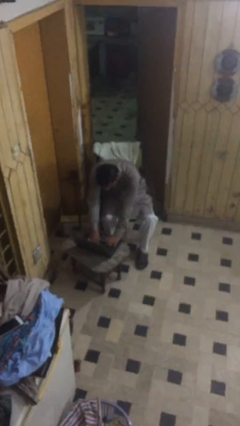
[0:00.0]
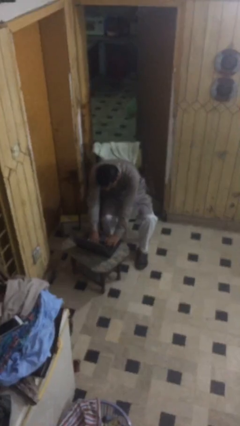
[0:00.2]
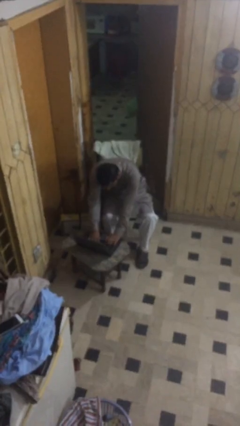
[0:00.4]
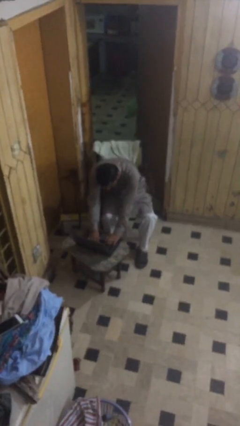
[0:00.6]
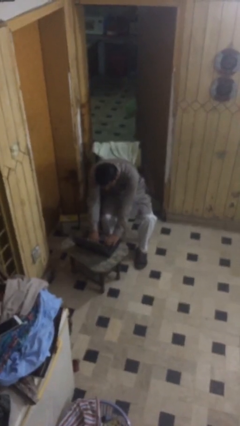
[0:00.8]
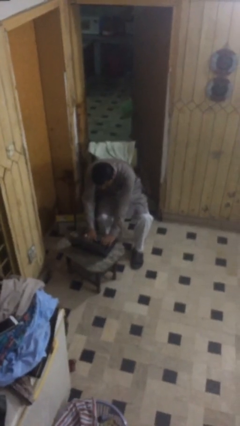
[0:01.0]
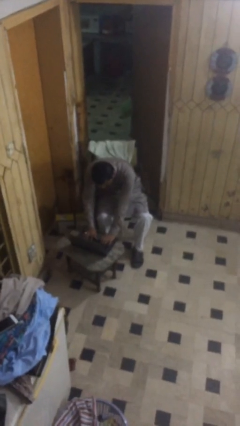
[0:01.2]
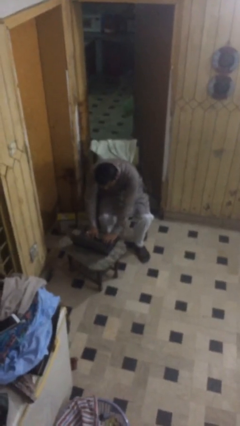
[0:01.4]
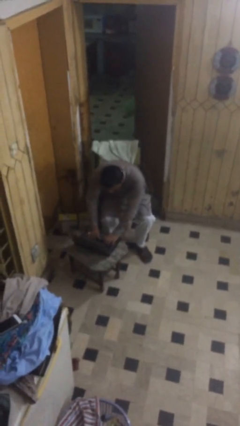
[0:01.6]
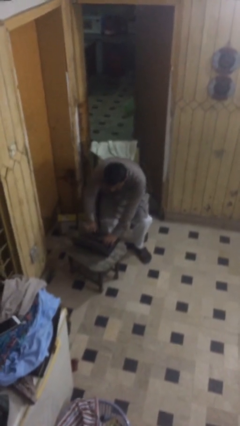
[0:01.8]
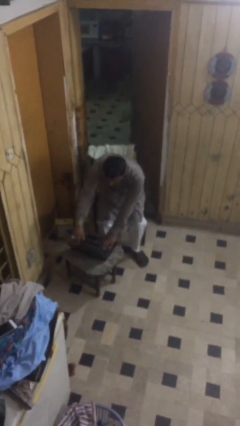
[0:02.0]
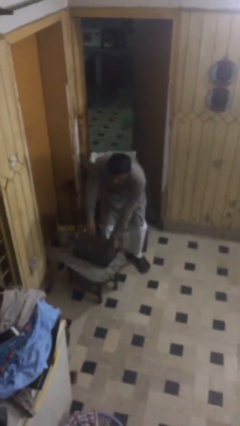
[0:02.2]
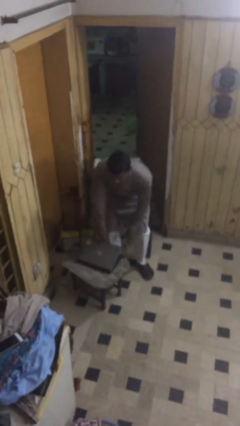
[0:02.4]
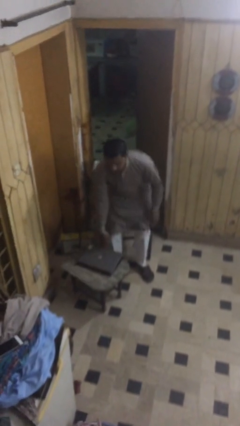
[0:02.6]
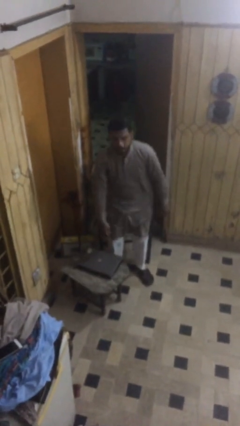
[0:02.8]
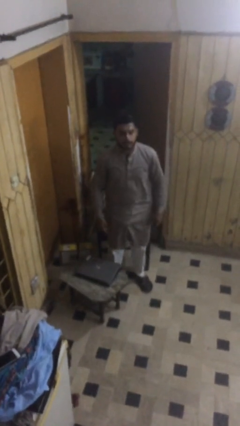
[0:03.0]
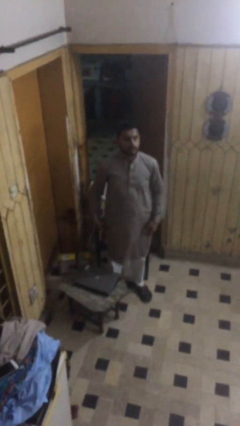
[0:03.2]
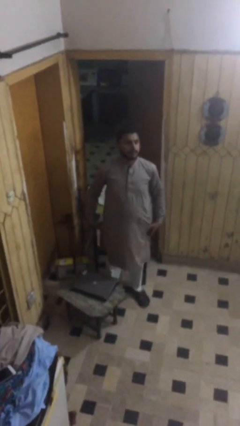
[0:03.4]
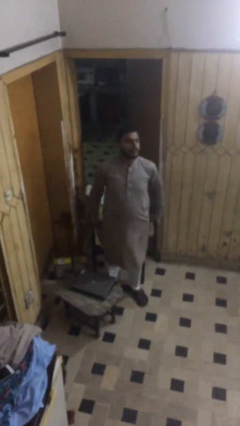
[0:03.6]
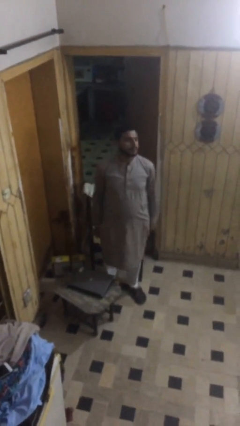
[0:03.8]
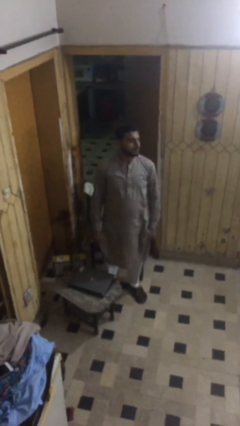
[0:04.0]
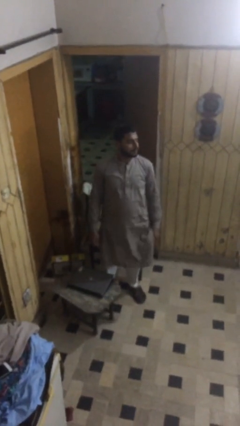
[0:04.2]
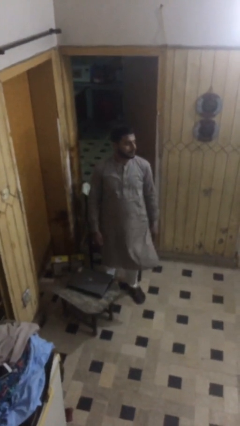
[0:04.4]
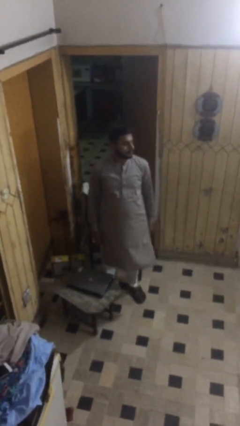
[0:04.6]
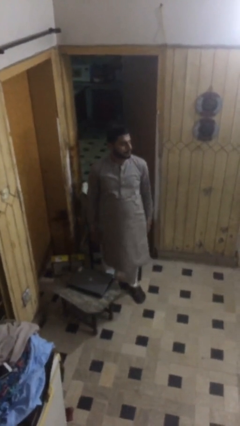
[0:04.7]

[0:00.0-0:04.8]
person stands up

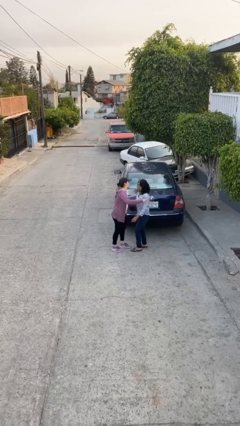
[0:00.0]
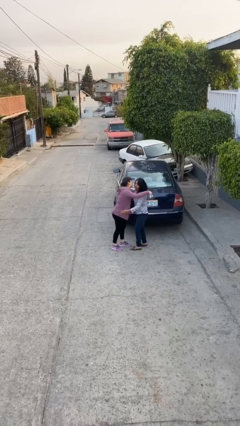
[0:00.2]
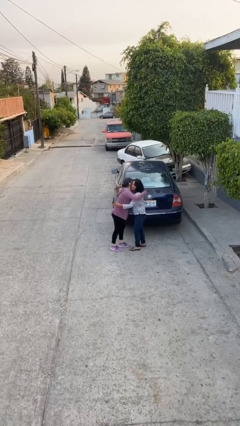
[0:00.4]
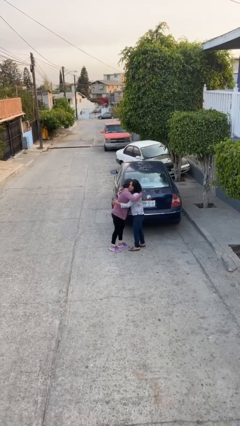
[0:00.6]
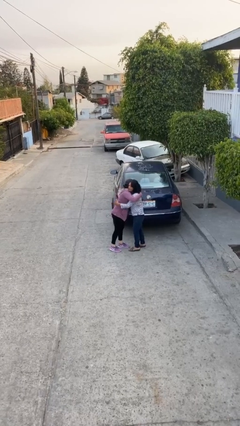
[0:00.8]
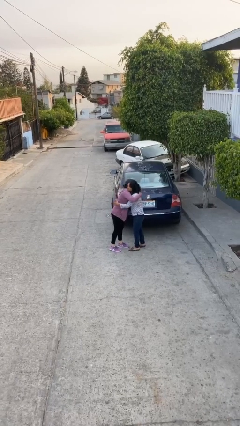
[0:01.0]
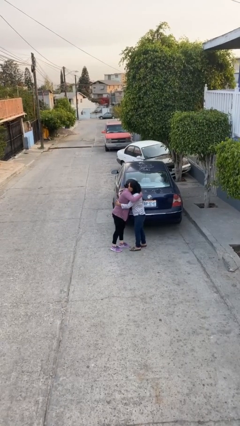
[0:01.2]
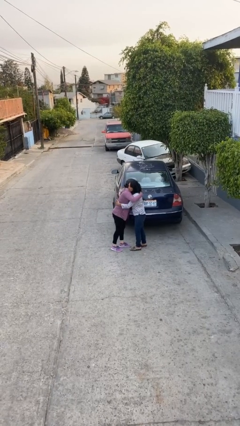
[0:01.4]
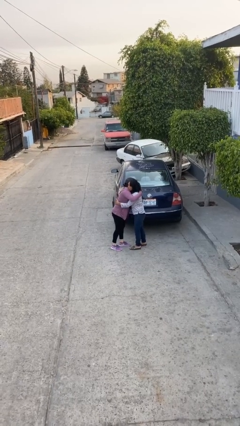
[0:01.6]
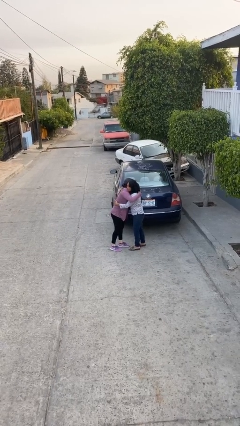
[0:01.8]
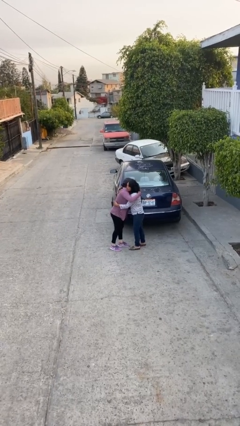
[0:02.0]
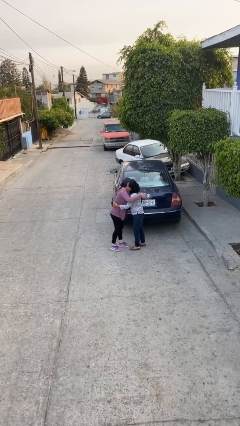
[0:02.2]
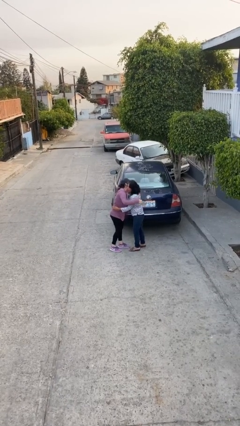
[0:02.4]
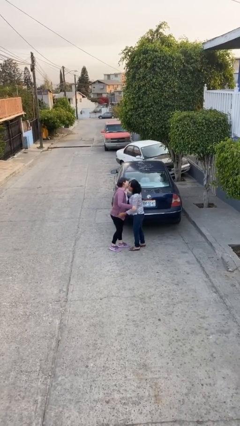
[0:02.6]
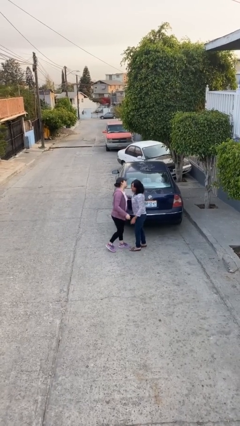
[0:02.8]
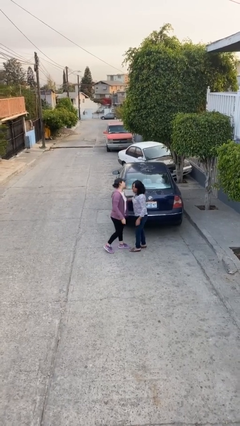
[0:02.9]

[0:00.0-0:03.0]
person embraces person

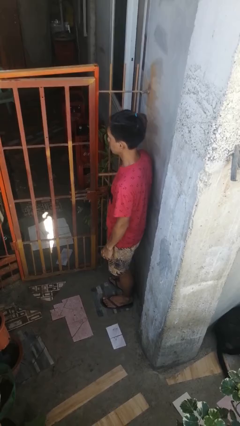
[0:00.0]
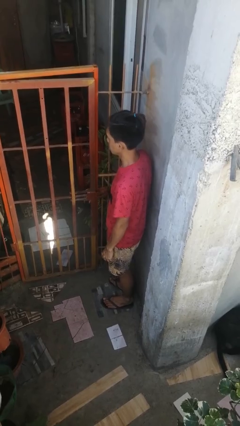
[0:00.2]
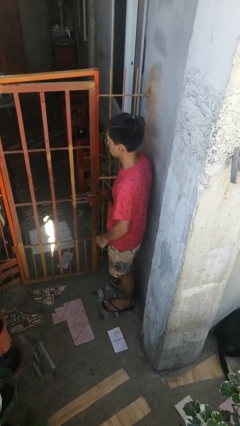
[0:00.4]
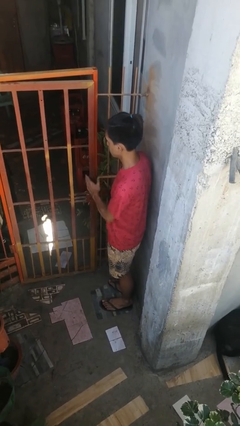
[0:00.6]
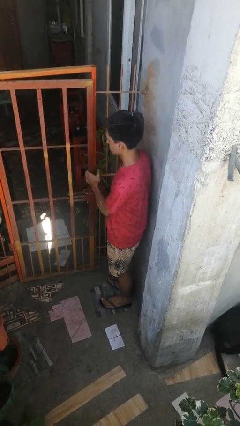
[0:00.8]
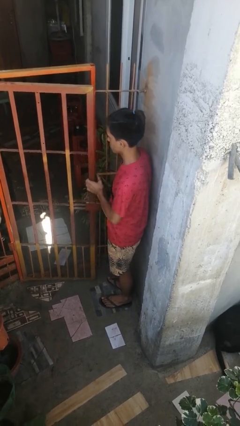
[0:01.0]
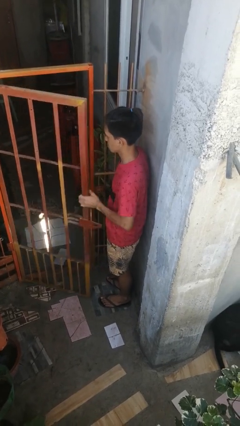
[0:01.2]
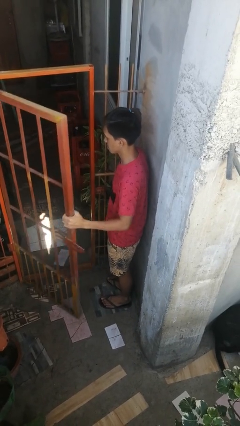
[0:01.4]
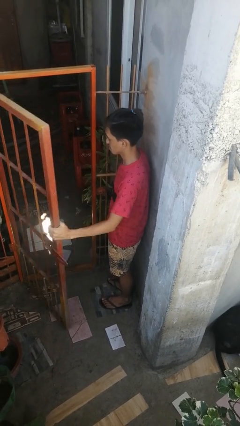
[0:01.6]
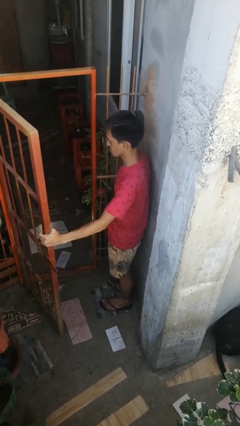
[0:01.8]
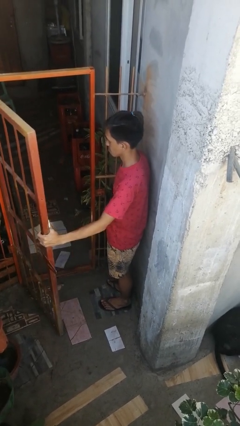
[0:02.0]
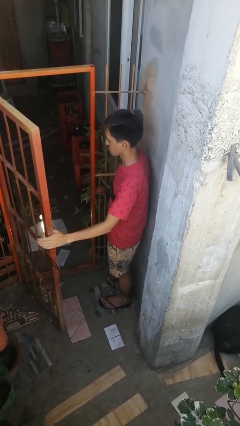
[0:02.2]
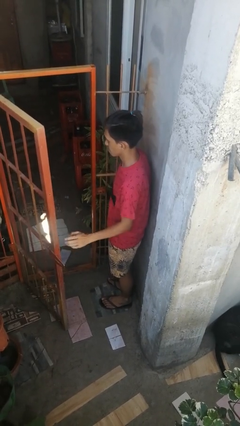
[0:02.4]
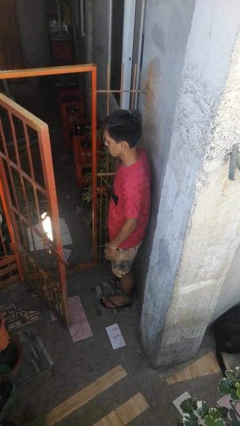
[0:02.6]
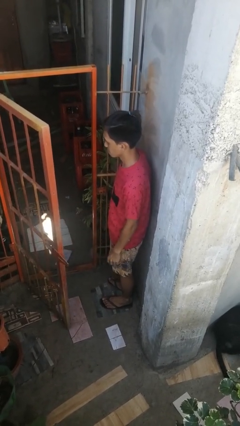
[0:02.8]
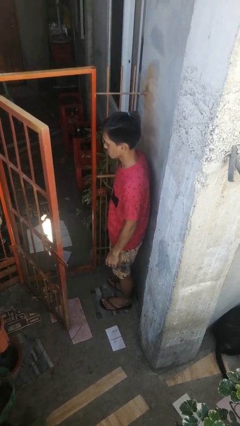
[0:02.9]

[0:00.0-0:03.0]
person opens gate

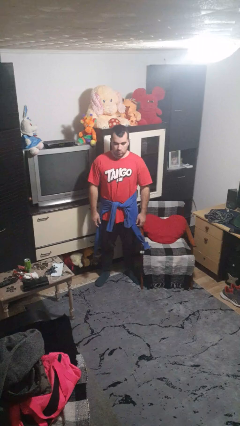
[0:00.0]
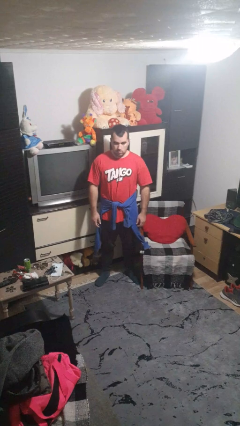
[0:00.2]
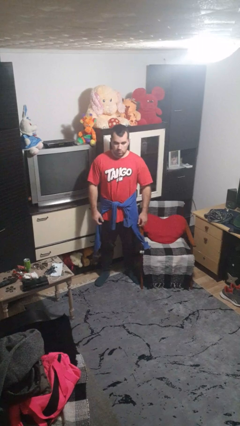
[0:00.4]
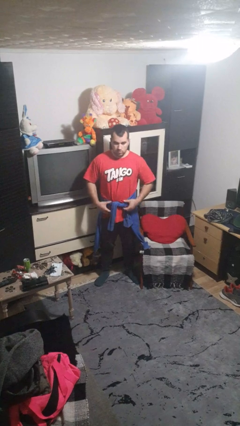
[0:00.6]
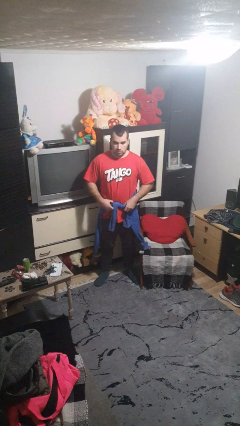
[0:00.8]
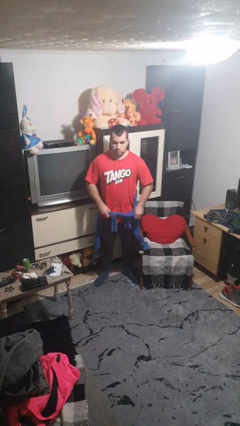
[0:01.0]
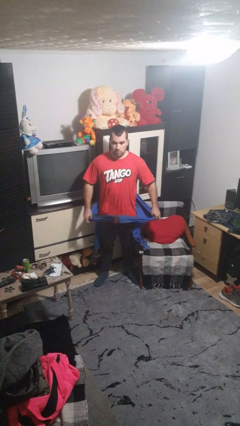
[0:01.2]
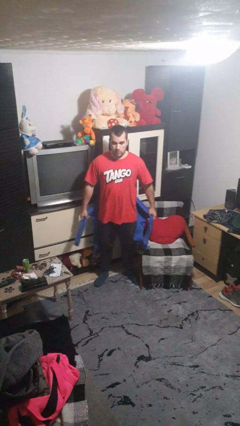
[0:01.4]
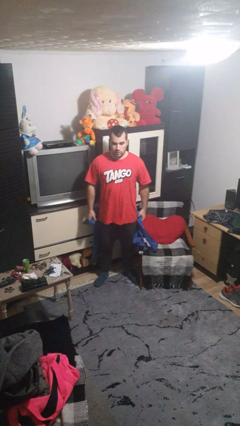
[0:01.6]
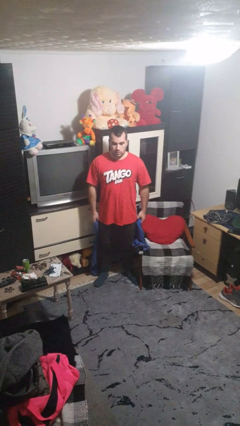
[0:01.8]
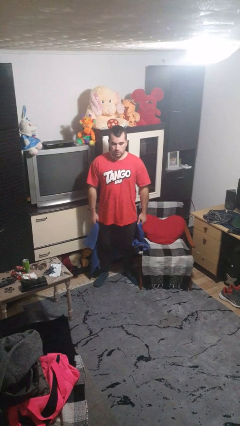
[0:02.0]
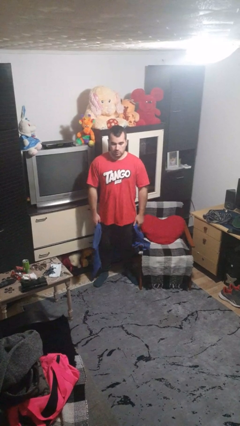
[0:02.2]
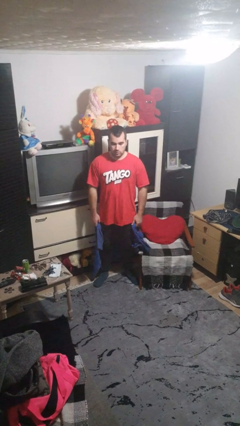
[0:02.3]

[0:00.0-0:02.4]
person unties jacket around waist

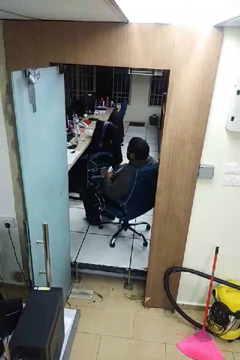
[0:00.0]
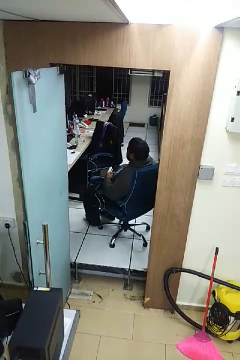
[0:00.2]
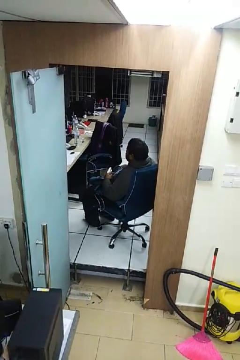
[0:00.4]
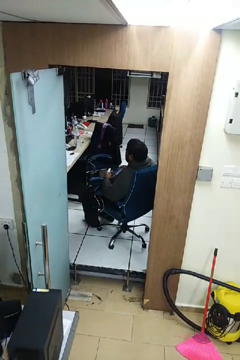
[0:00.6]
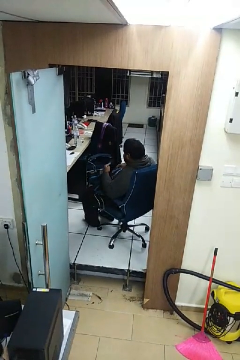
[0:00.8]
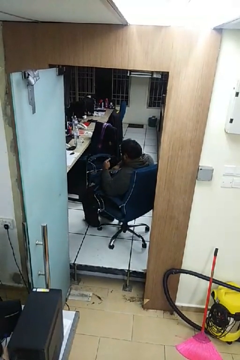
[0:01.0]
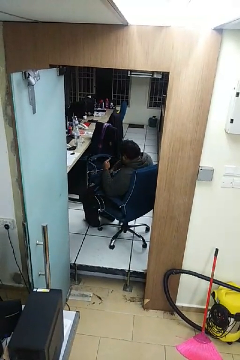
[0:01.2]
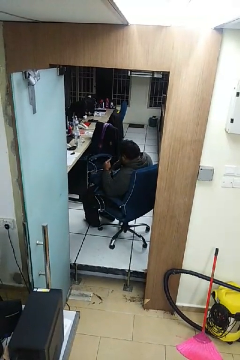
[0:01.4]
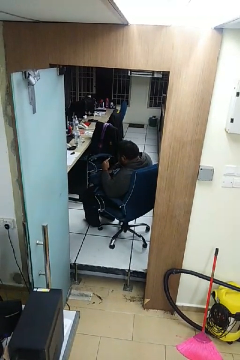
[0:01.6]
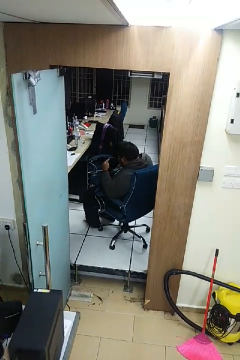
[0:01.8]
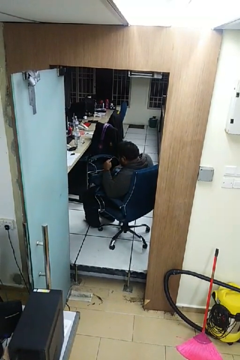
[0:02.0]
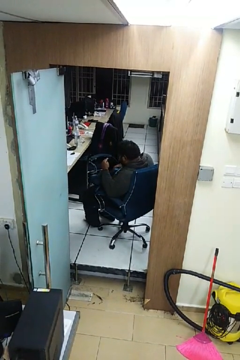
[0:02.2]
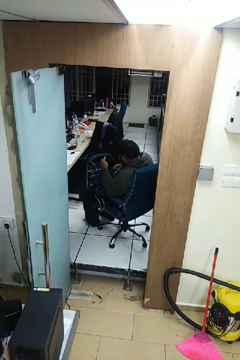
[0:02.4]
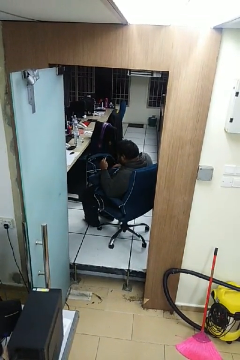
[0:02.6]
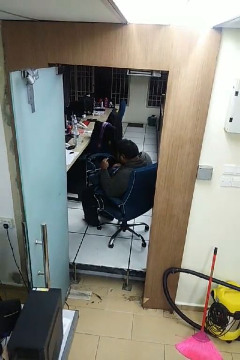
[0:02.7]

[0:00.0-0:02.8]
person searches in backpack

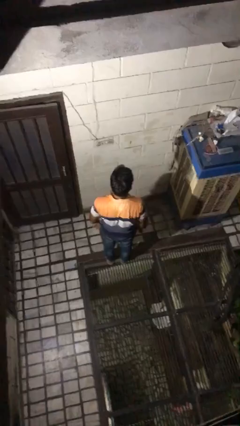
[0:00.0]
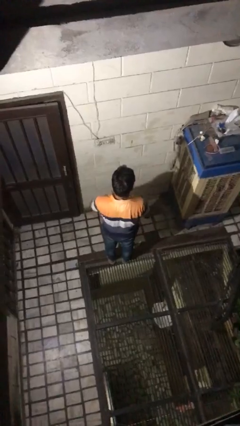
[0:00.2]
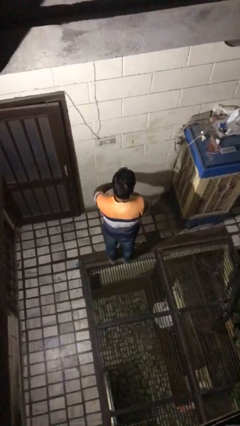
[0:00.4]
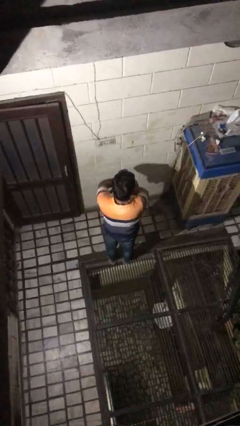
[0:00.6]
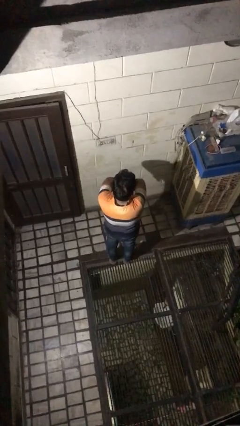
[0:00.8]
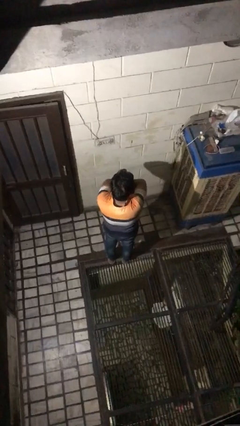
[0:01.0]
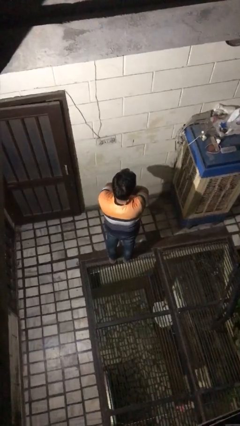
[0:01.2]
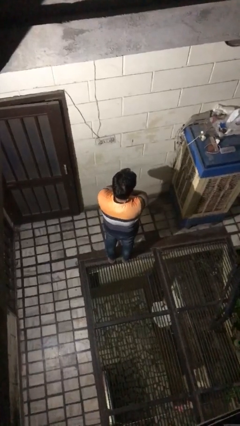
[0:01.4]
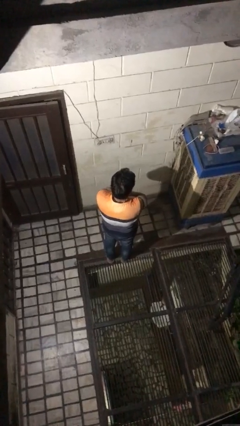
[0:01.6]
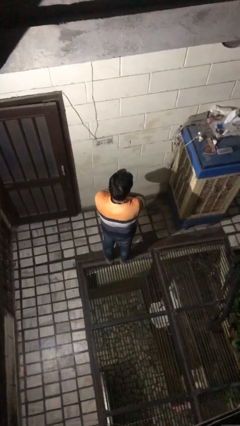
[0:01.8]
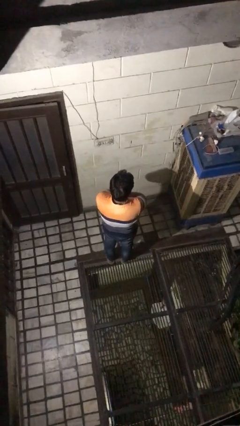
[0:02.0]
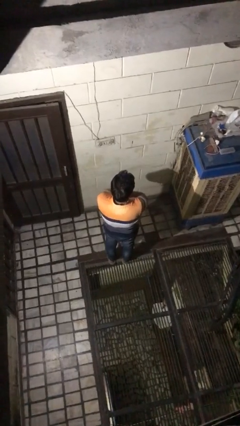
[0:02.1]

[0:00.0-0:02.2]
person crosses arms

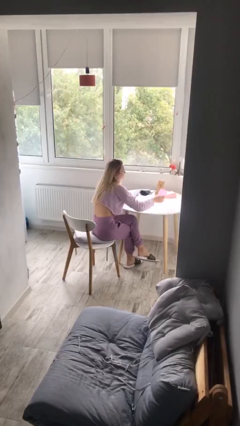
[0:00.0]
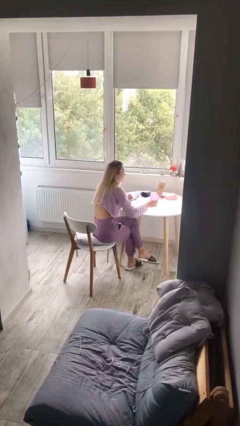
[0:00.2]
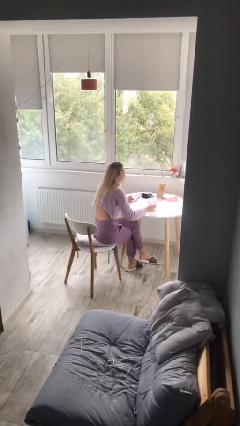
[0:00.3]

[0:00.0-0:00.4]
person sets upright glass
